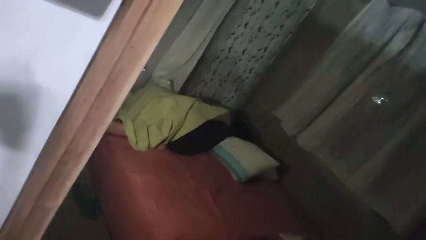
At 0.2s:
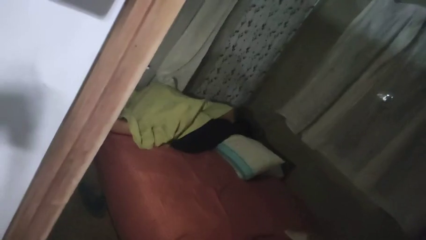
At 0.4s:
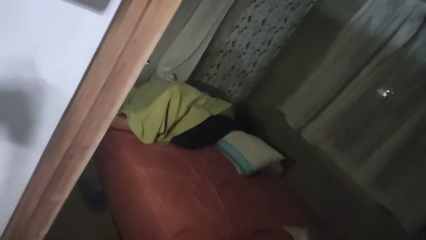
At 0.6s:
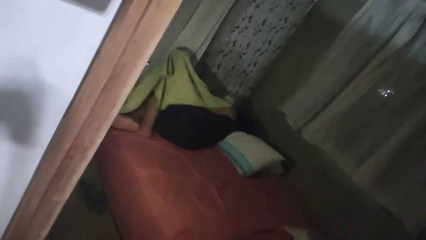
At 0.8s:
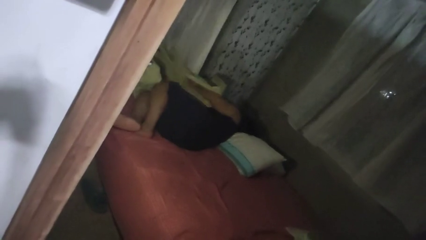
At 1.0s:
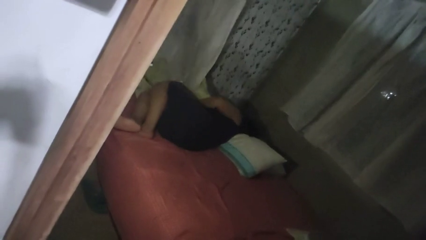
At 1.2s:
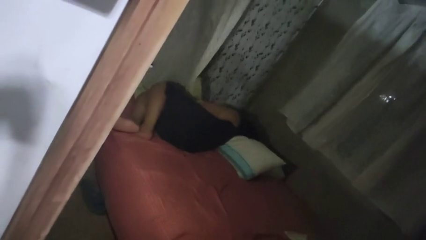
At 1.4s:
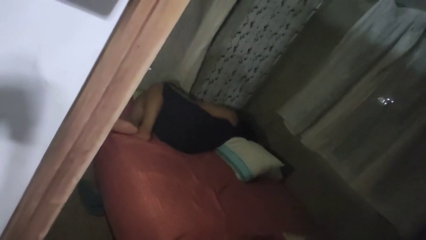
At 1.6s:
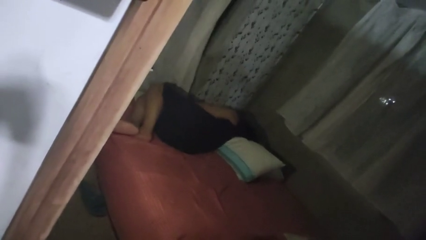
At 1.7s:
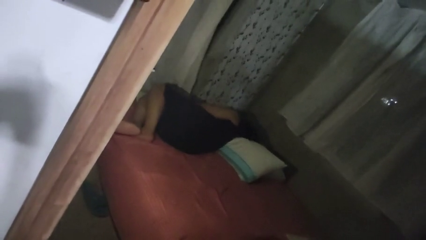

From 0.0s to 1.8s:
person uncovers with bedsheets

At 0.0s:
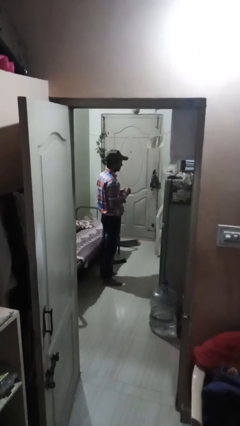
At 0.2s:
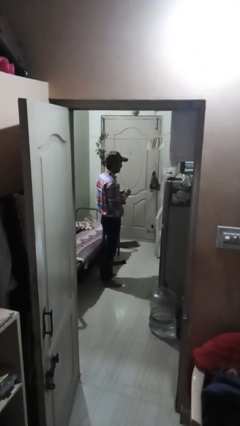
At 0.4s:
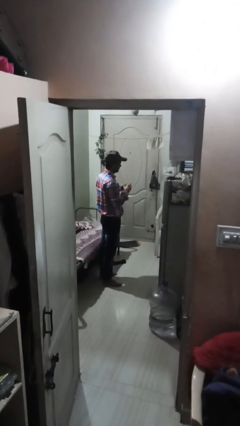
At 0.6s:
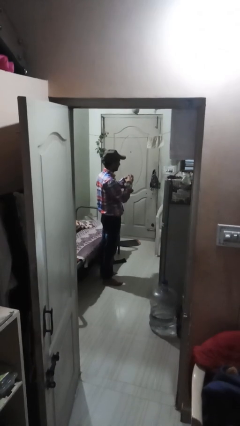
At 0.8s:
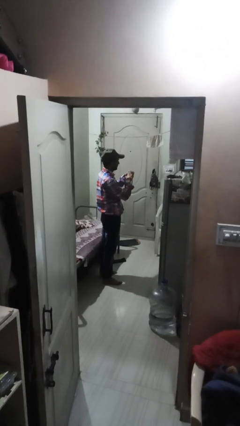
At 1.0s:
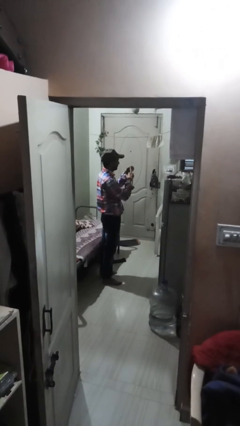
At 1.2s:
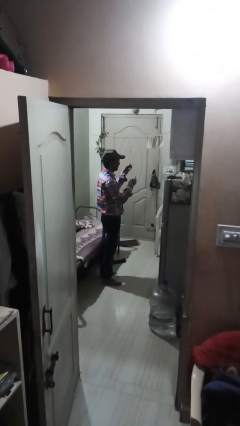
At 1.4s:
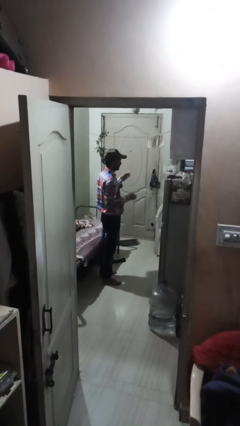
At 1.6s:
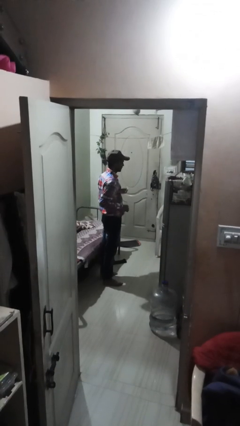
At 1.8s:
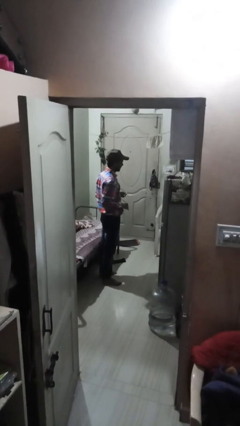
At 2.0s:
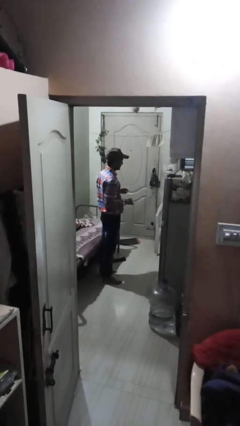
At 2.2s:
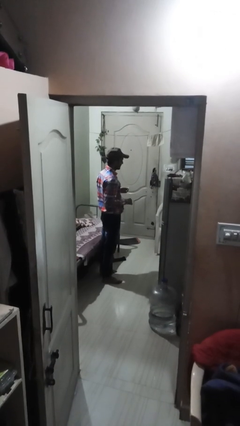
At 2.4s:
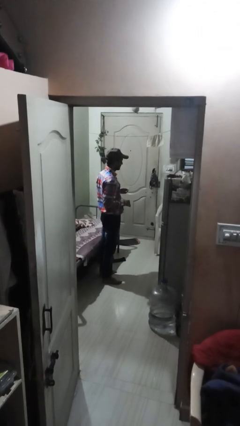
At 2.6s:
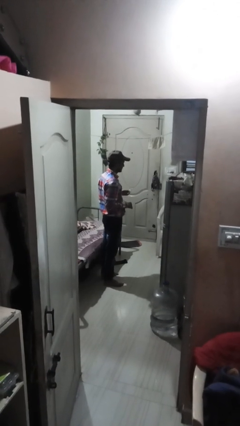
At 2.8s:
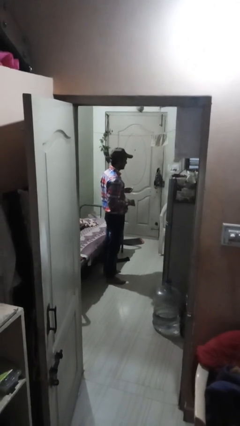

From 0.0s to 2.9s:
person takes off ring

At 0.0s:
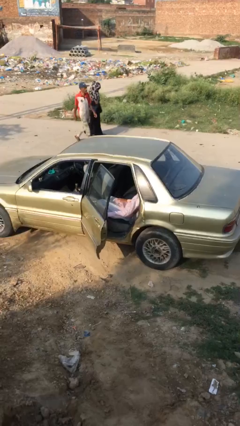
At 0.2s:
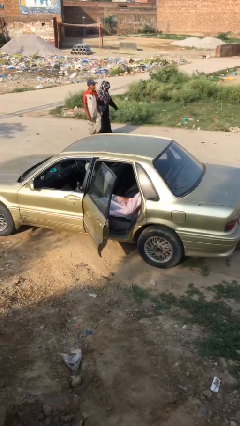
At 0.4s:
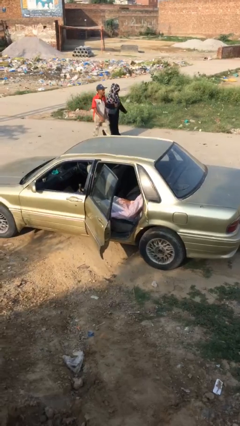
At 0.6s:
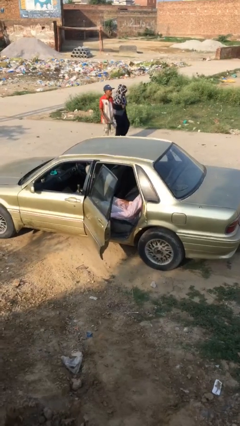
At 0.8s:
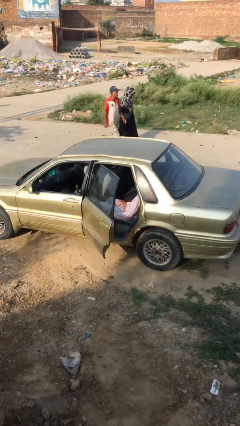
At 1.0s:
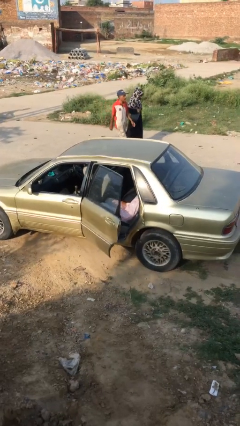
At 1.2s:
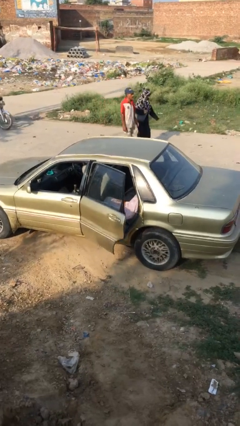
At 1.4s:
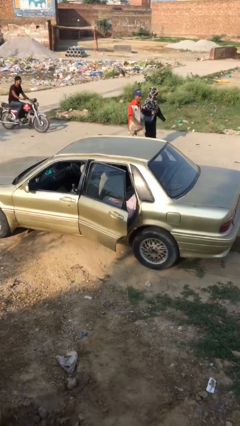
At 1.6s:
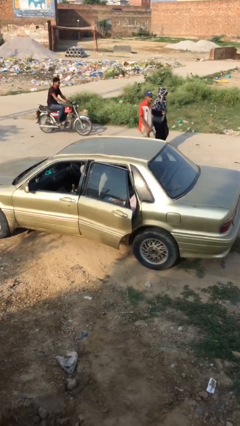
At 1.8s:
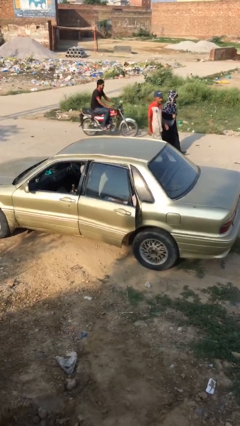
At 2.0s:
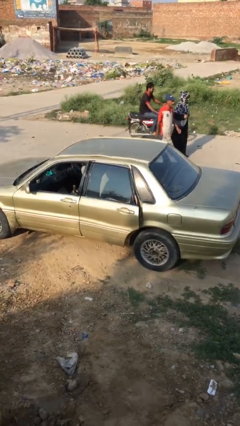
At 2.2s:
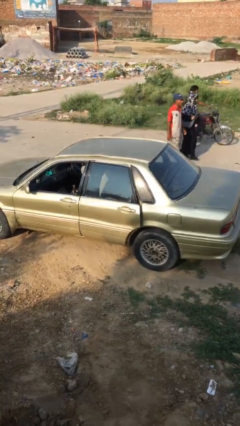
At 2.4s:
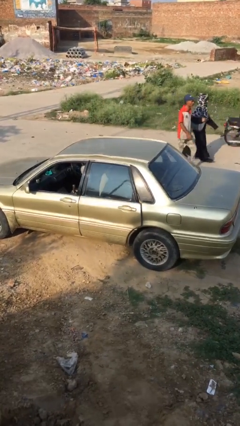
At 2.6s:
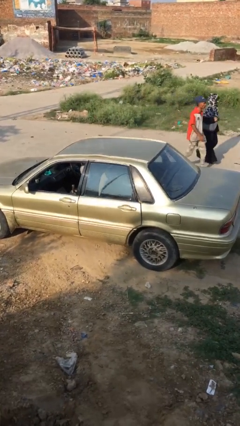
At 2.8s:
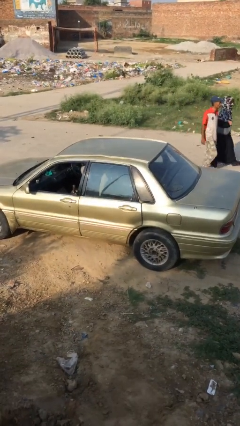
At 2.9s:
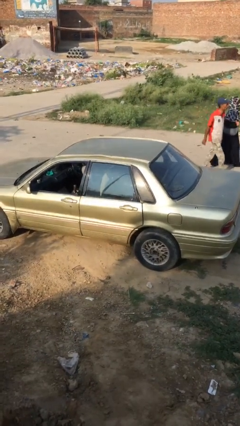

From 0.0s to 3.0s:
person closes car door

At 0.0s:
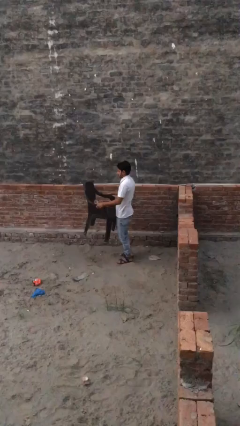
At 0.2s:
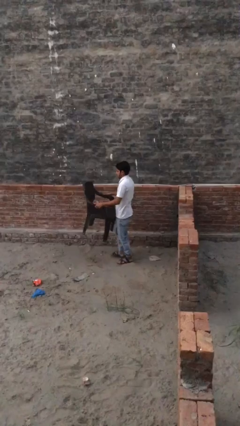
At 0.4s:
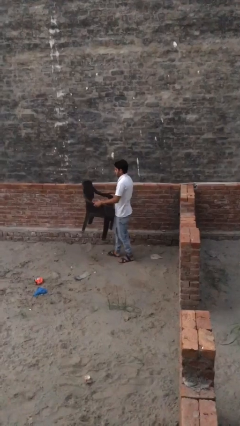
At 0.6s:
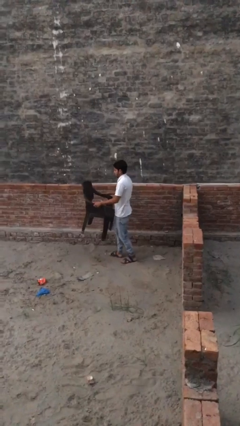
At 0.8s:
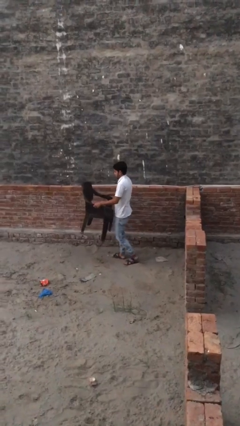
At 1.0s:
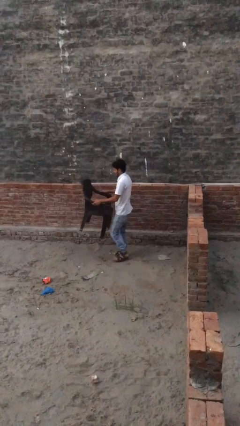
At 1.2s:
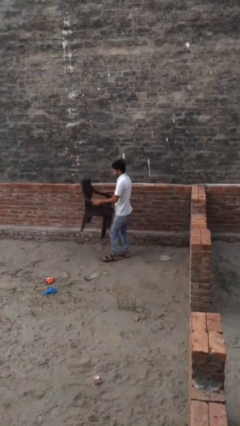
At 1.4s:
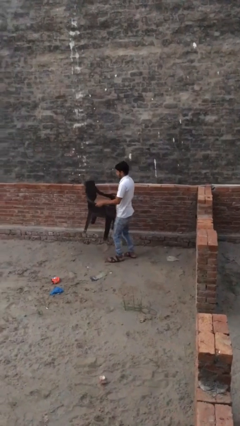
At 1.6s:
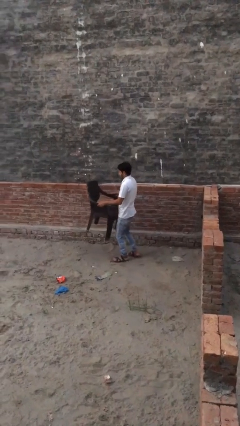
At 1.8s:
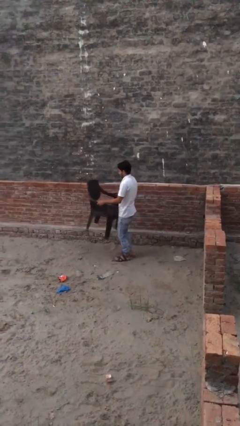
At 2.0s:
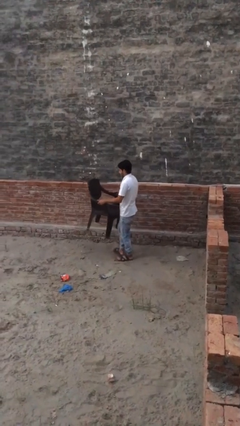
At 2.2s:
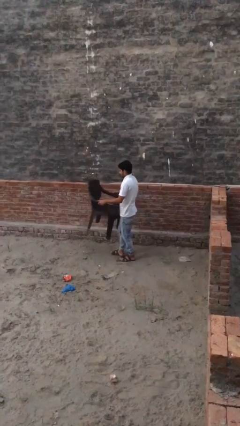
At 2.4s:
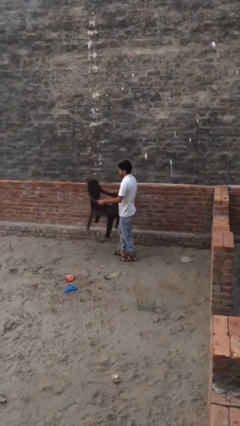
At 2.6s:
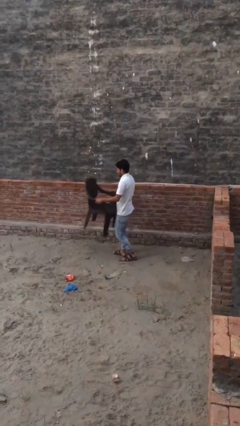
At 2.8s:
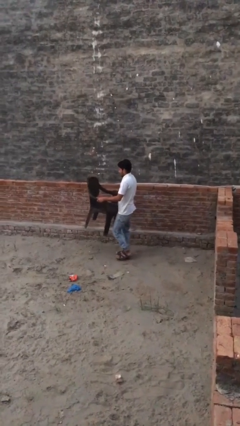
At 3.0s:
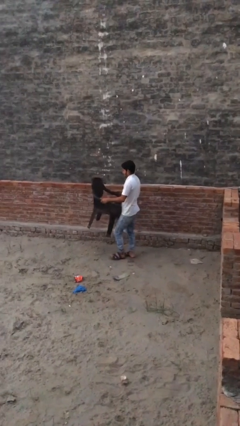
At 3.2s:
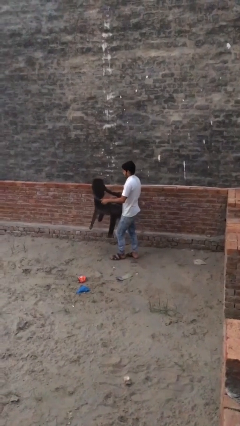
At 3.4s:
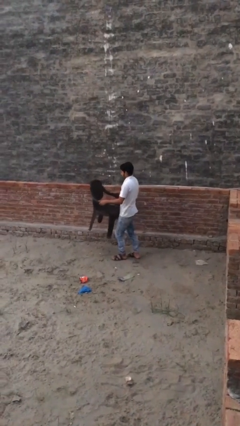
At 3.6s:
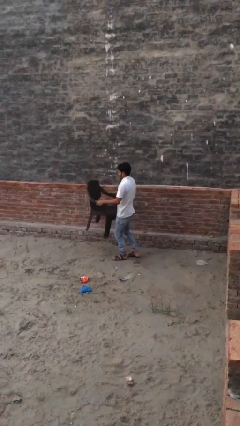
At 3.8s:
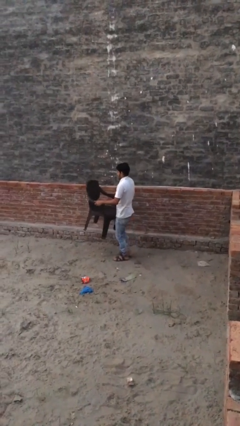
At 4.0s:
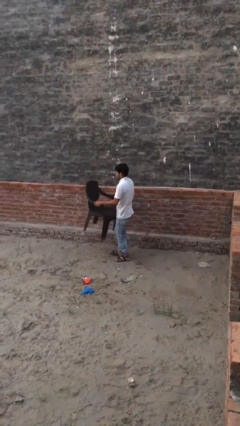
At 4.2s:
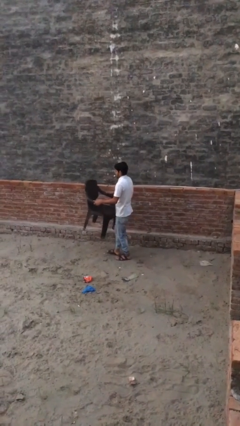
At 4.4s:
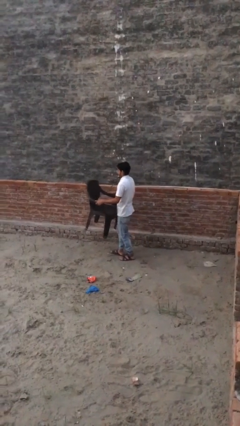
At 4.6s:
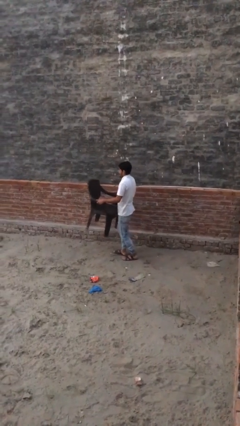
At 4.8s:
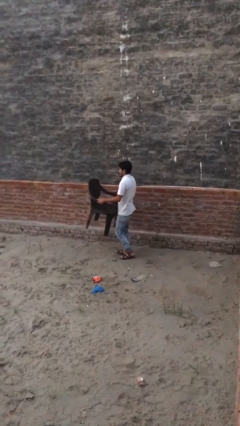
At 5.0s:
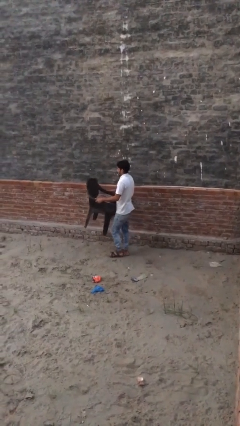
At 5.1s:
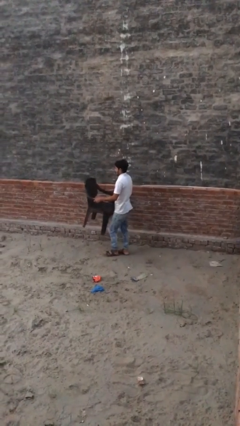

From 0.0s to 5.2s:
person carries heavy object

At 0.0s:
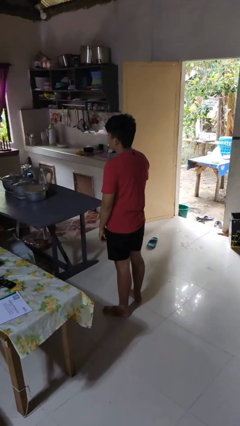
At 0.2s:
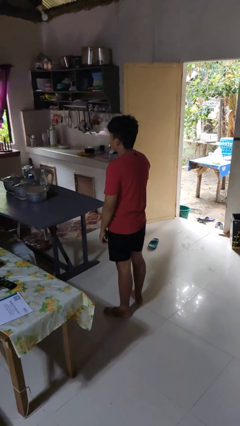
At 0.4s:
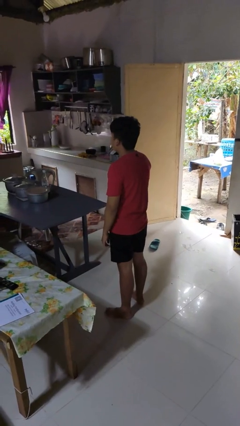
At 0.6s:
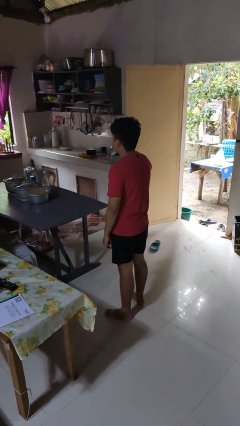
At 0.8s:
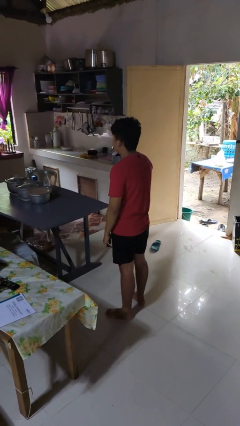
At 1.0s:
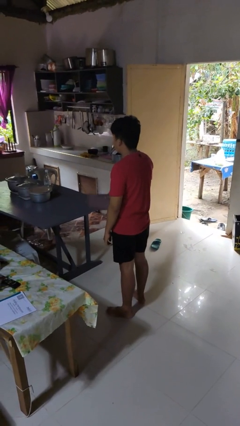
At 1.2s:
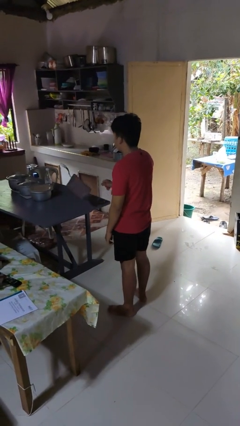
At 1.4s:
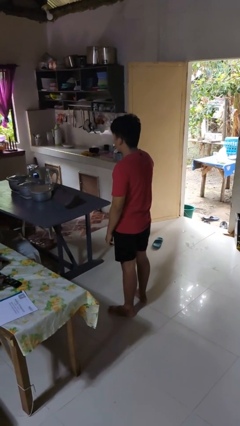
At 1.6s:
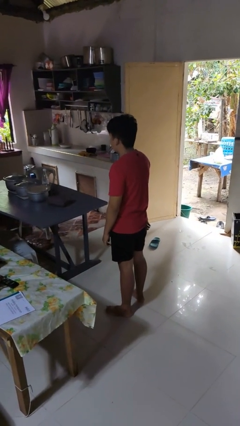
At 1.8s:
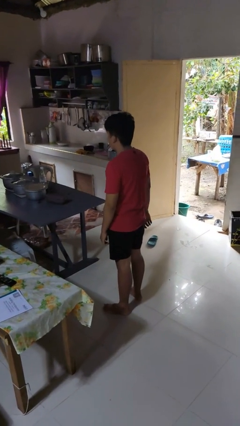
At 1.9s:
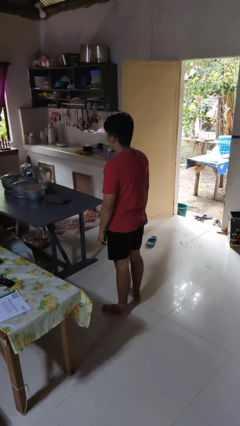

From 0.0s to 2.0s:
person throws object on table

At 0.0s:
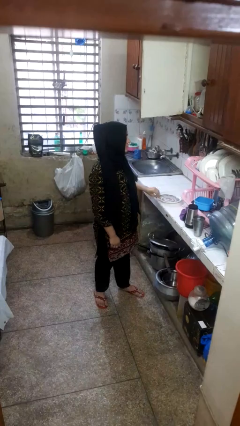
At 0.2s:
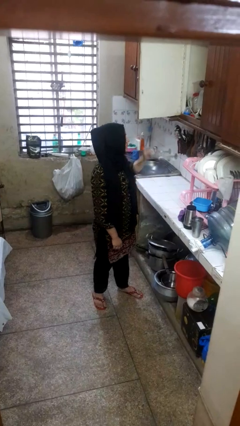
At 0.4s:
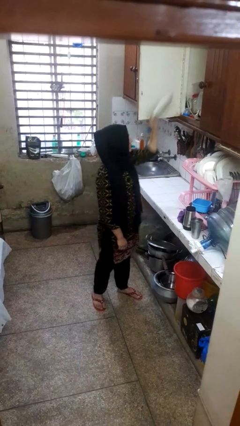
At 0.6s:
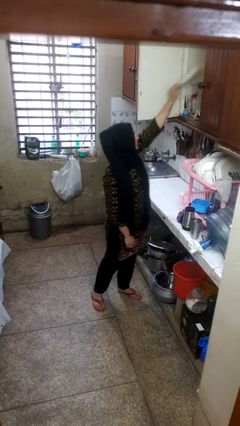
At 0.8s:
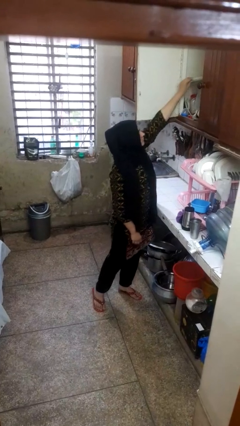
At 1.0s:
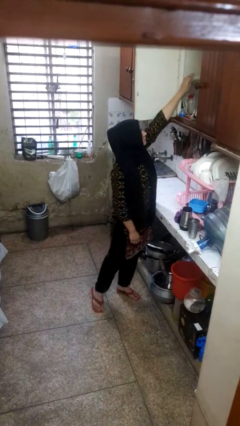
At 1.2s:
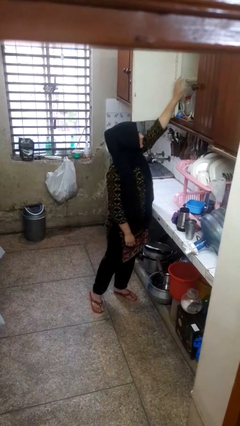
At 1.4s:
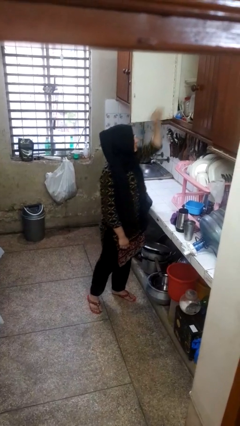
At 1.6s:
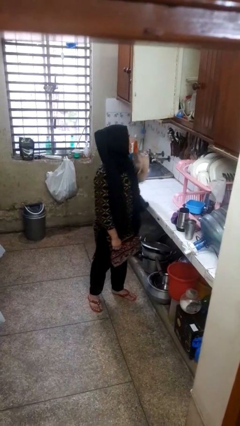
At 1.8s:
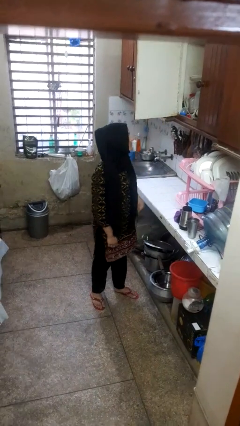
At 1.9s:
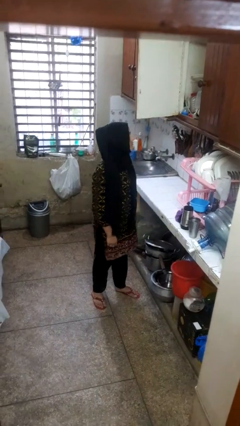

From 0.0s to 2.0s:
person puts object in cabinet
